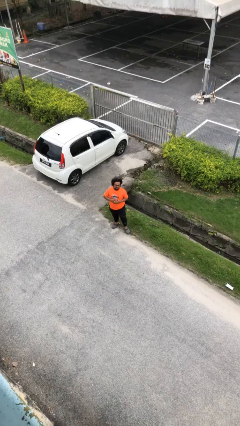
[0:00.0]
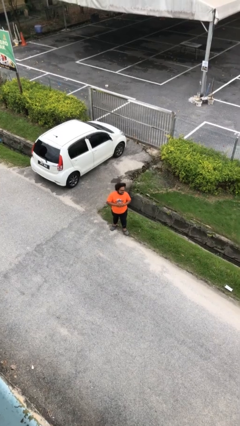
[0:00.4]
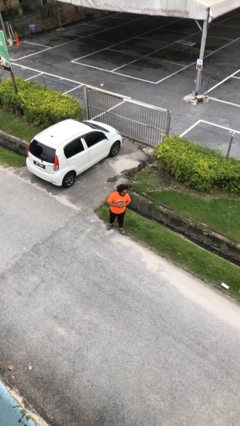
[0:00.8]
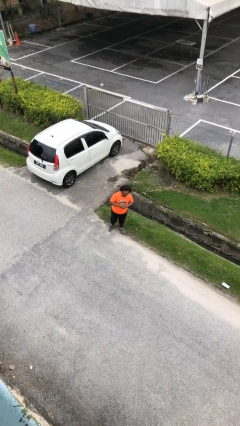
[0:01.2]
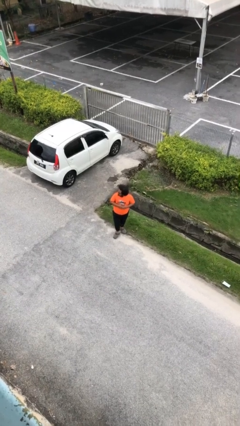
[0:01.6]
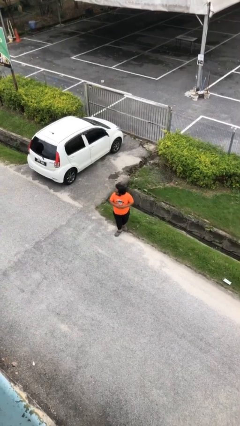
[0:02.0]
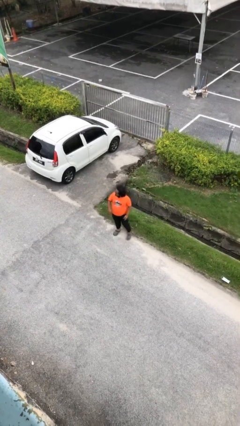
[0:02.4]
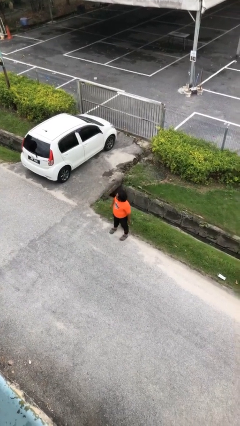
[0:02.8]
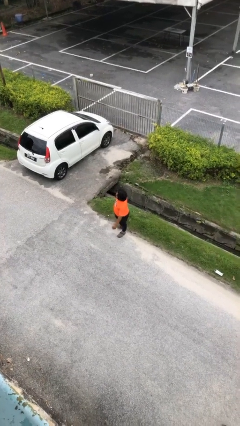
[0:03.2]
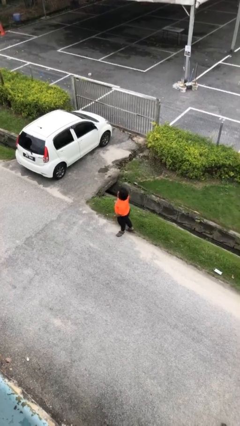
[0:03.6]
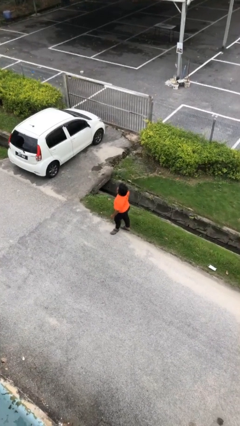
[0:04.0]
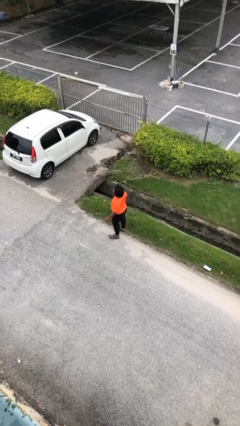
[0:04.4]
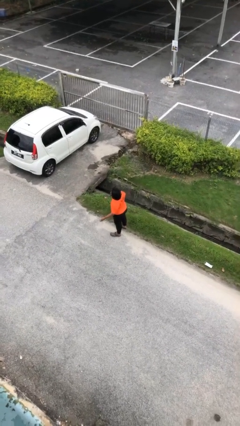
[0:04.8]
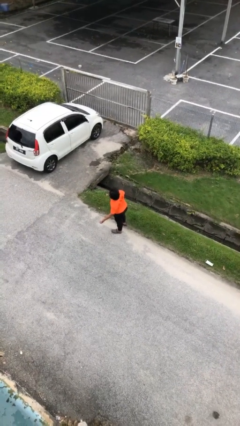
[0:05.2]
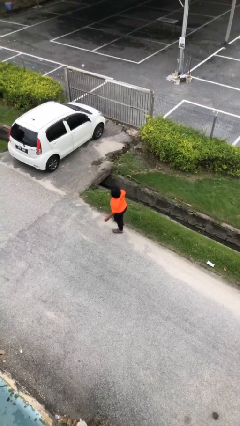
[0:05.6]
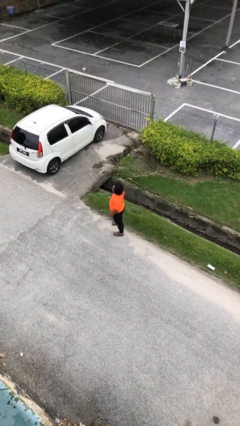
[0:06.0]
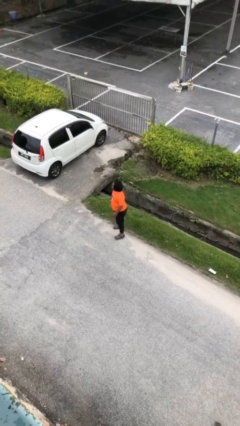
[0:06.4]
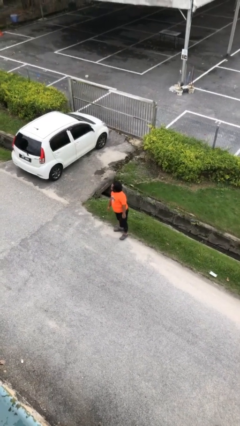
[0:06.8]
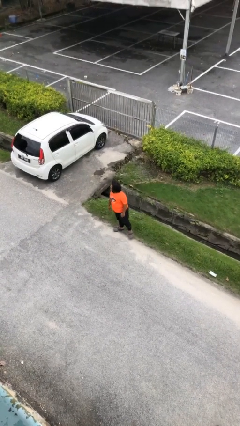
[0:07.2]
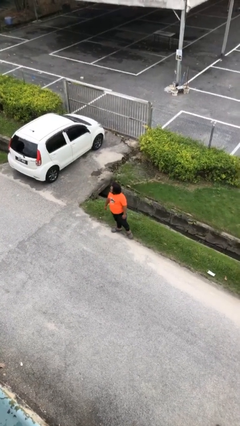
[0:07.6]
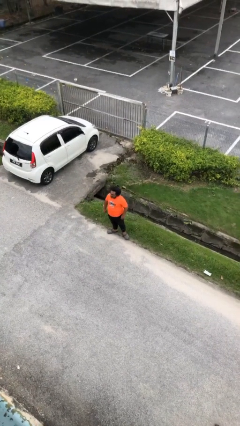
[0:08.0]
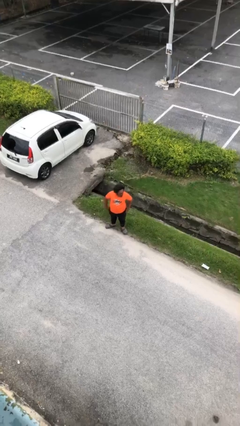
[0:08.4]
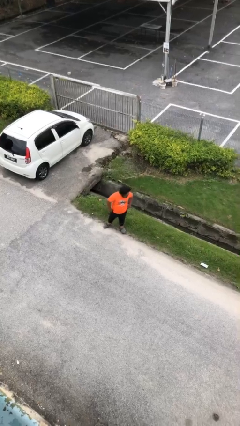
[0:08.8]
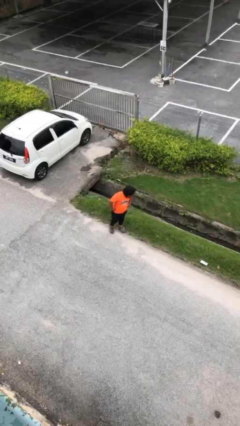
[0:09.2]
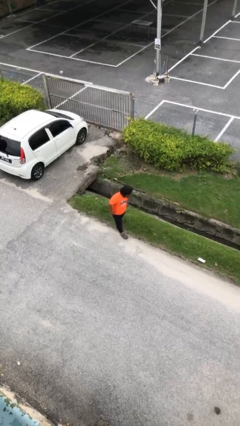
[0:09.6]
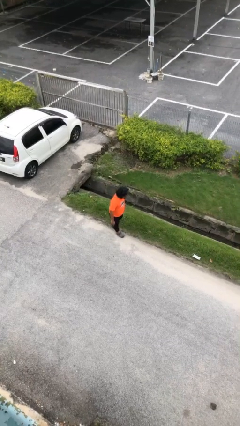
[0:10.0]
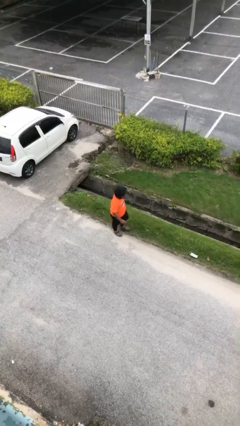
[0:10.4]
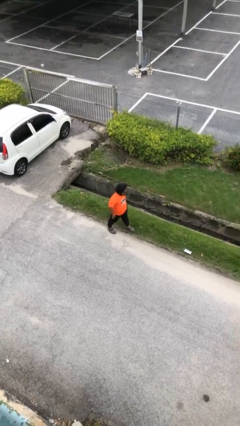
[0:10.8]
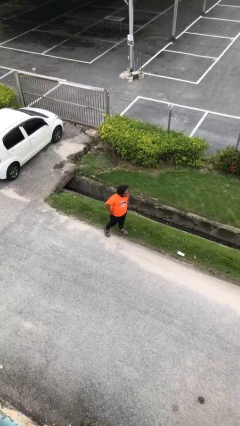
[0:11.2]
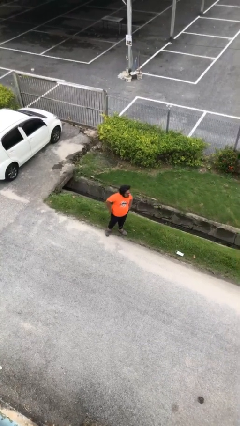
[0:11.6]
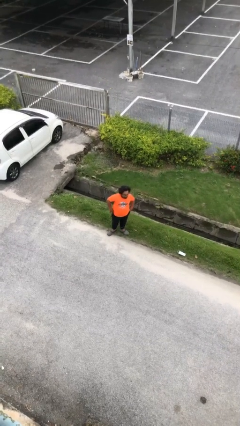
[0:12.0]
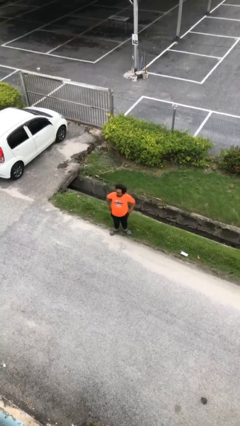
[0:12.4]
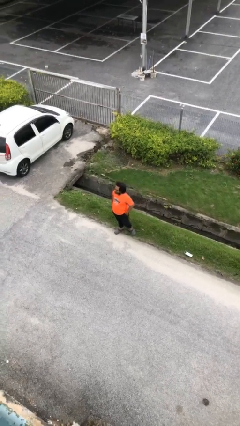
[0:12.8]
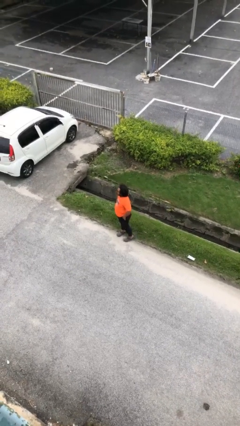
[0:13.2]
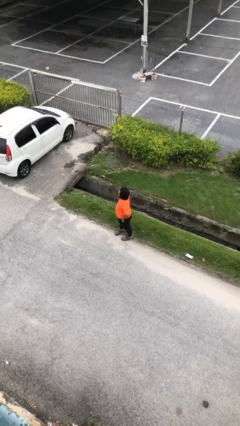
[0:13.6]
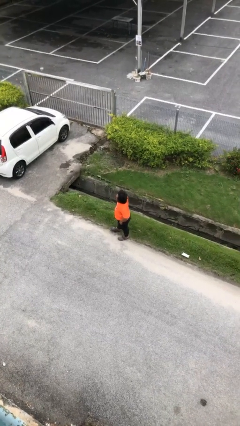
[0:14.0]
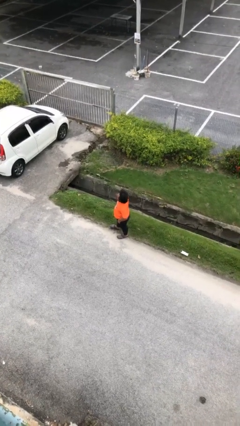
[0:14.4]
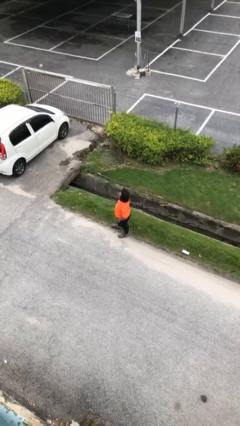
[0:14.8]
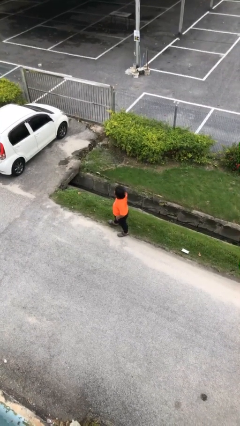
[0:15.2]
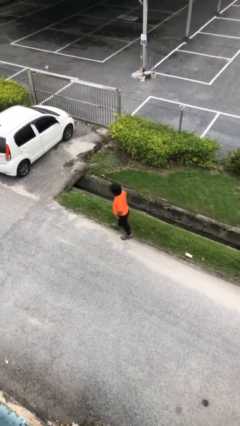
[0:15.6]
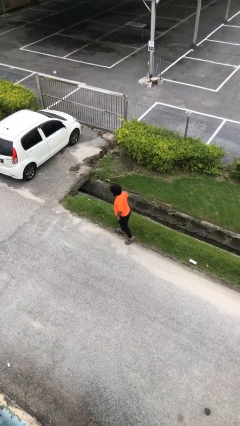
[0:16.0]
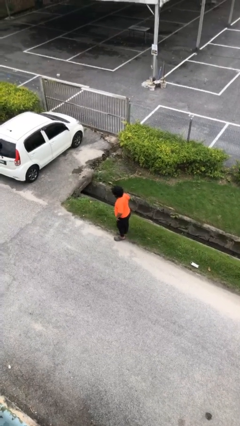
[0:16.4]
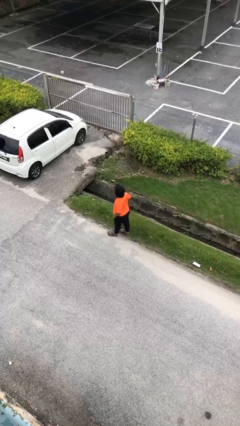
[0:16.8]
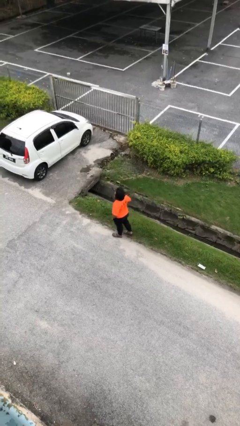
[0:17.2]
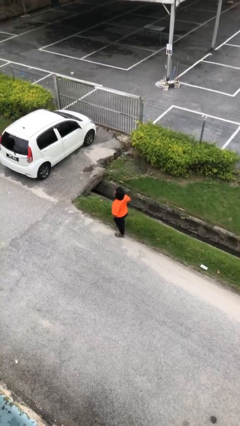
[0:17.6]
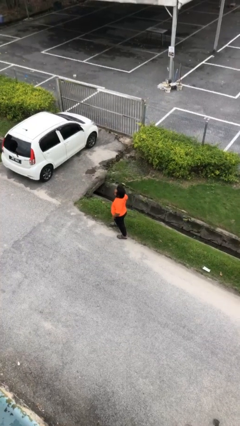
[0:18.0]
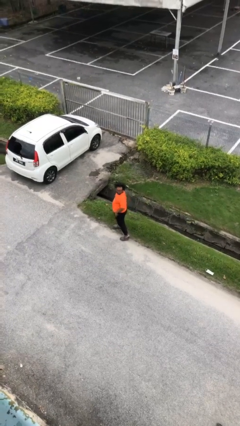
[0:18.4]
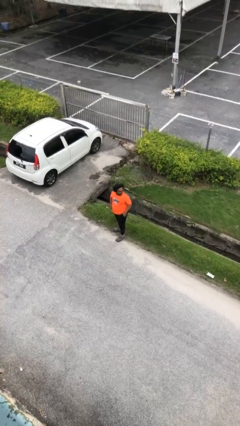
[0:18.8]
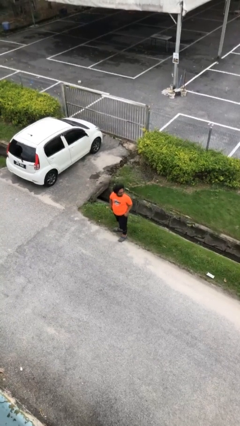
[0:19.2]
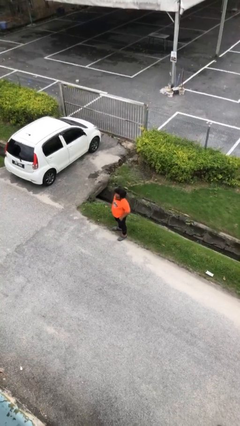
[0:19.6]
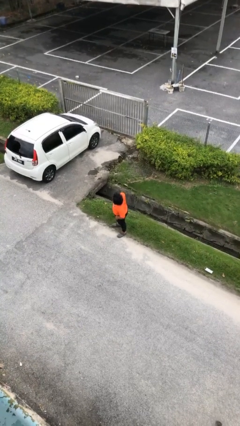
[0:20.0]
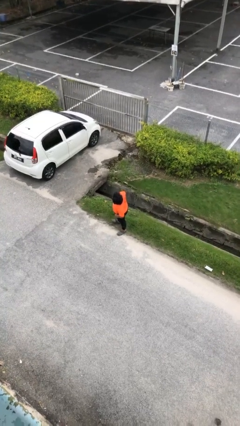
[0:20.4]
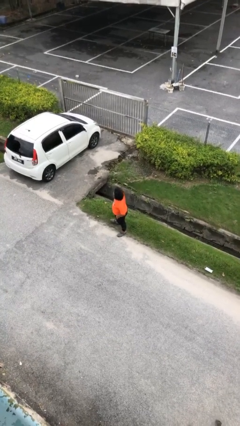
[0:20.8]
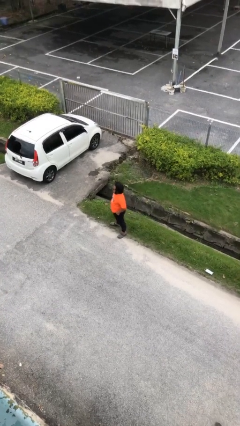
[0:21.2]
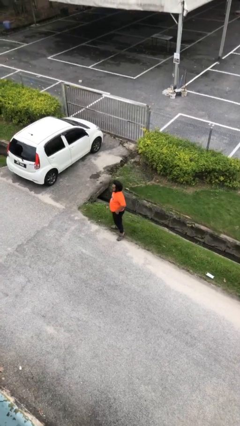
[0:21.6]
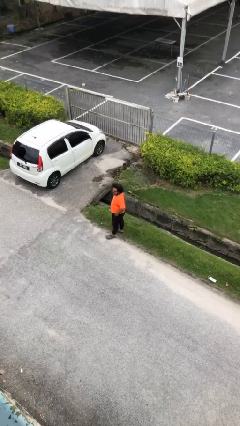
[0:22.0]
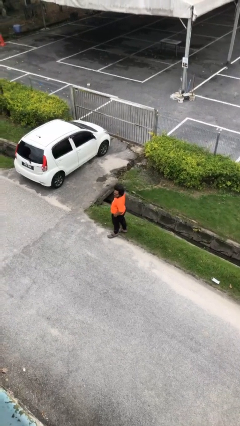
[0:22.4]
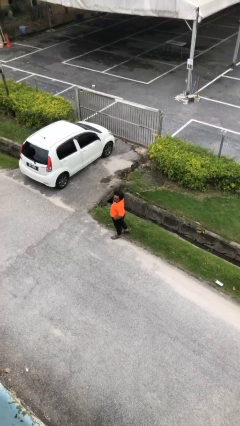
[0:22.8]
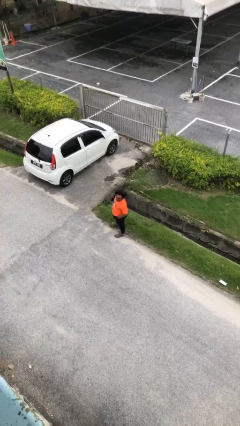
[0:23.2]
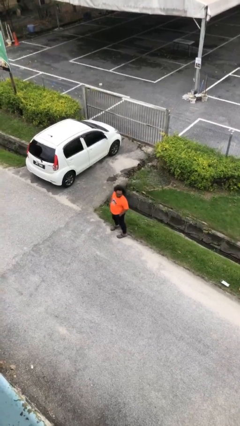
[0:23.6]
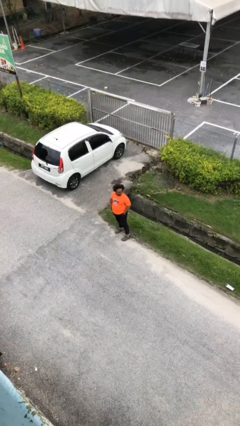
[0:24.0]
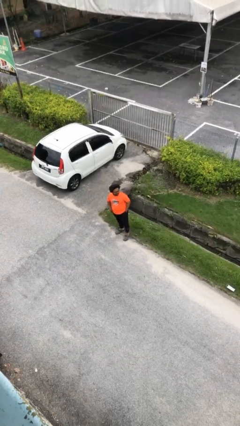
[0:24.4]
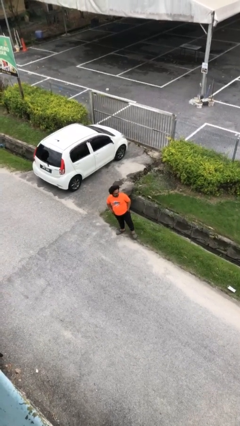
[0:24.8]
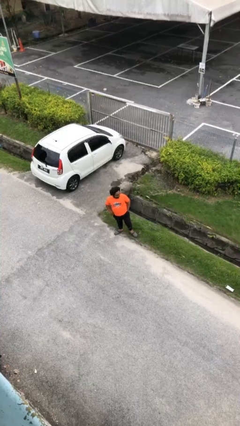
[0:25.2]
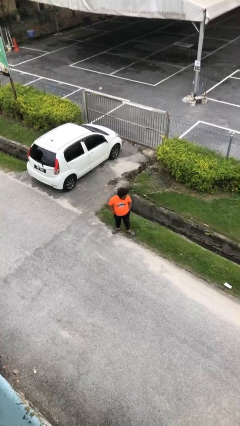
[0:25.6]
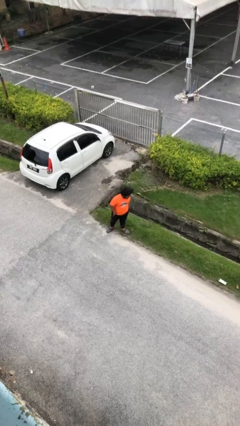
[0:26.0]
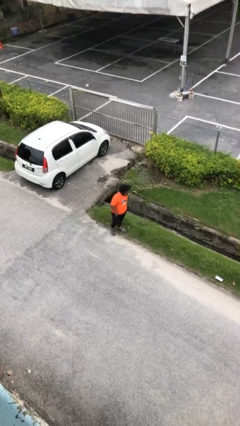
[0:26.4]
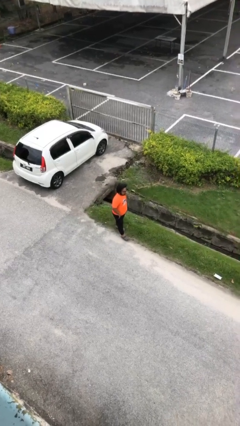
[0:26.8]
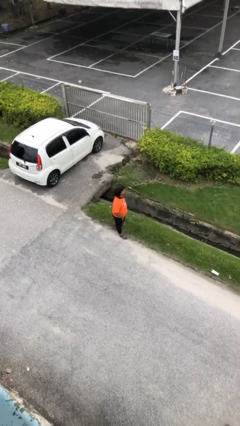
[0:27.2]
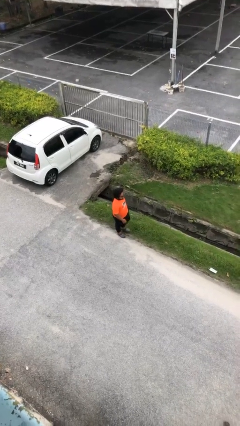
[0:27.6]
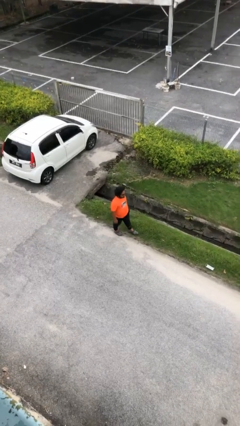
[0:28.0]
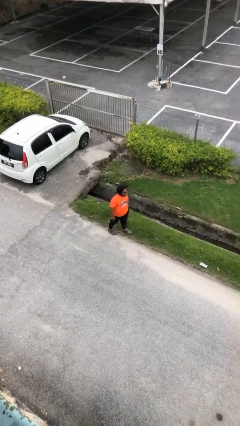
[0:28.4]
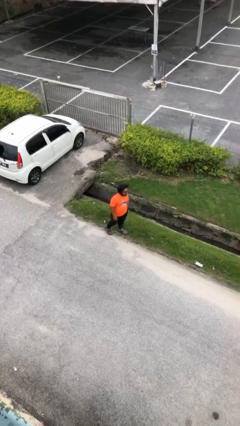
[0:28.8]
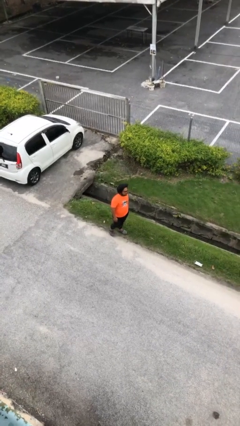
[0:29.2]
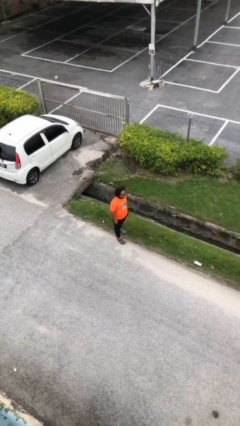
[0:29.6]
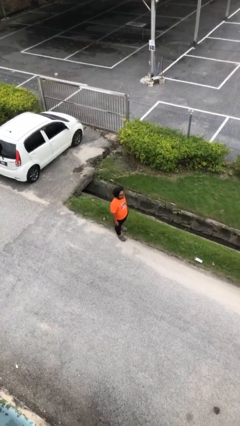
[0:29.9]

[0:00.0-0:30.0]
person walks

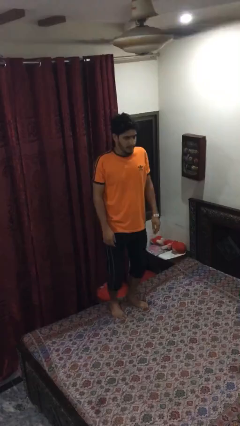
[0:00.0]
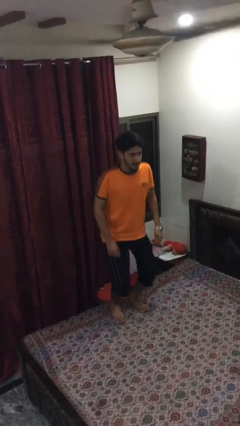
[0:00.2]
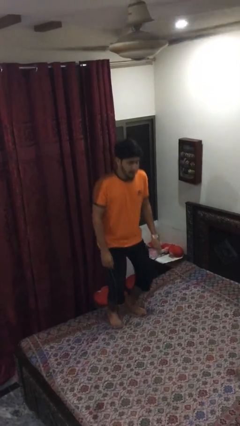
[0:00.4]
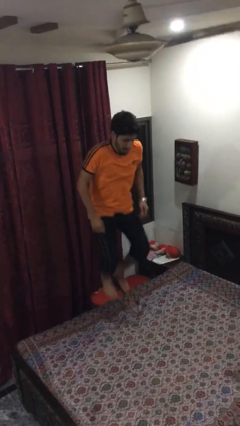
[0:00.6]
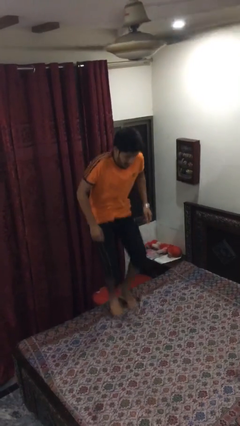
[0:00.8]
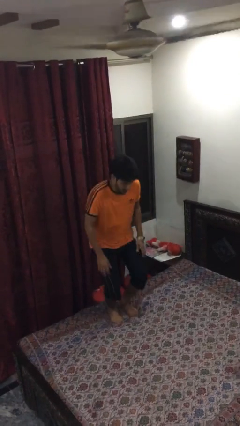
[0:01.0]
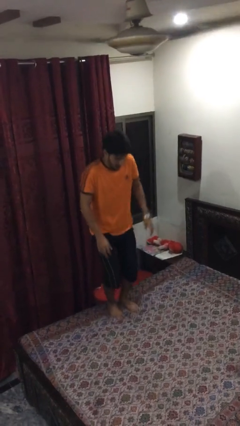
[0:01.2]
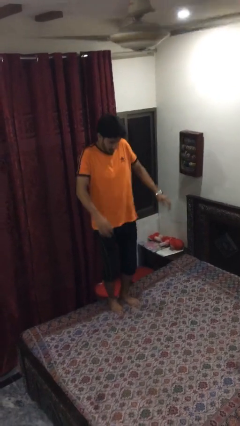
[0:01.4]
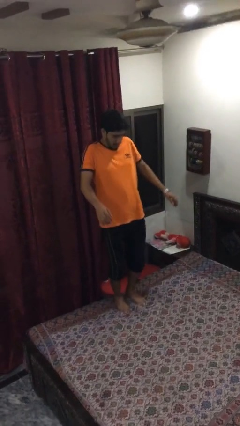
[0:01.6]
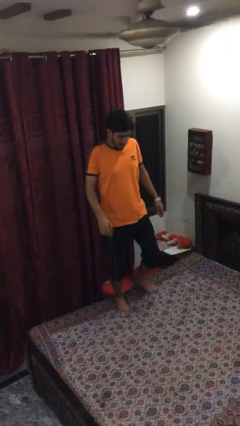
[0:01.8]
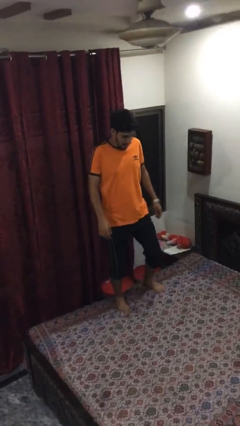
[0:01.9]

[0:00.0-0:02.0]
person jumps on bed

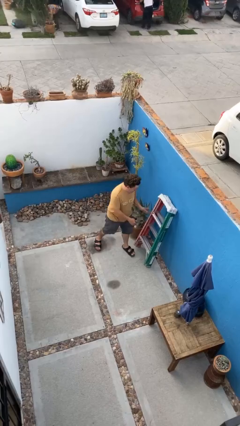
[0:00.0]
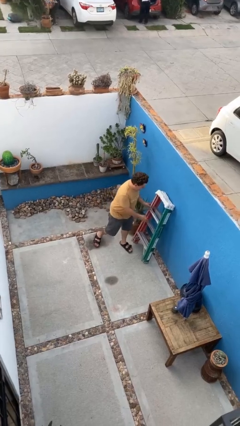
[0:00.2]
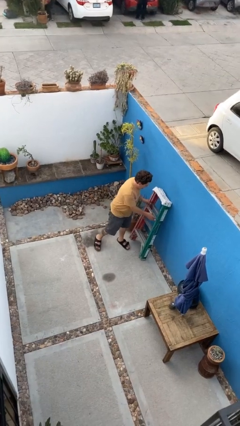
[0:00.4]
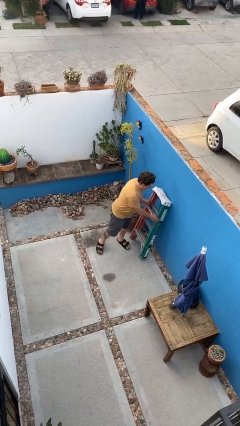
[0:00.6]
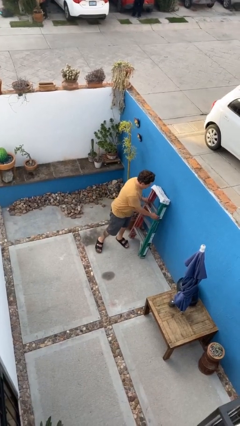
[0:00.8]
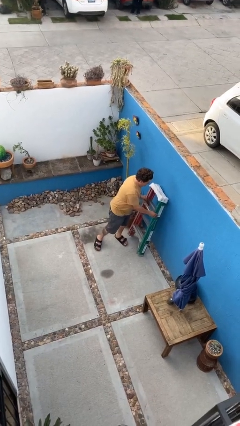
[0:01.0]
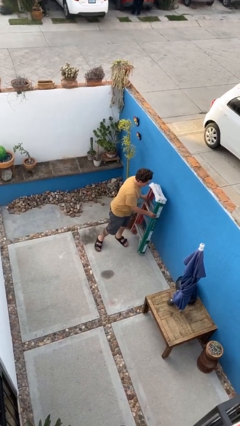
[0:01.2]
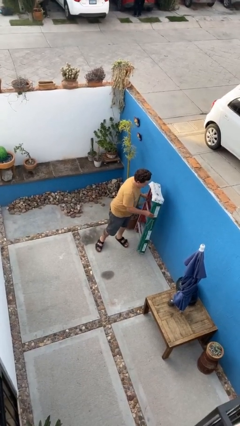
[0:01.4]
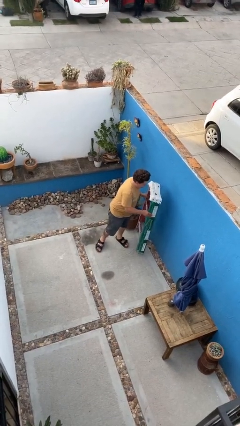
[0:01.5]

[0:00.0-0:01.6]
person picks up object from floor
